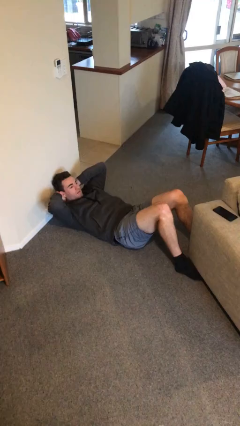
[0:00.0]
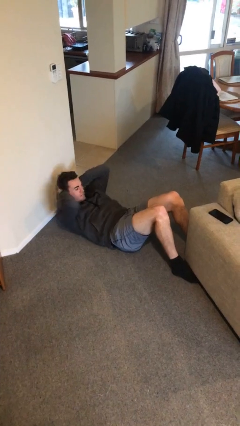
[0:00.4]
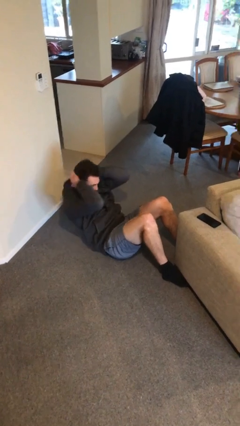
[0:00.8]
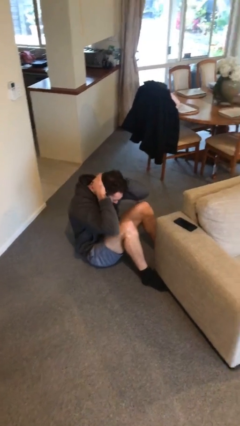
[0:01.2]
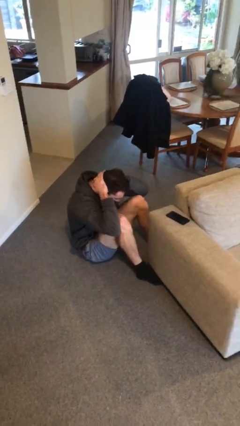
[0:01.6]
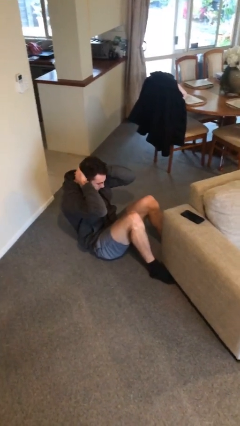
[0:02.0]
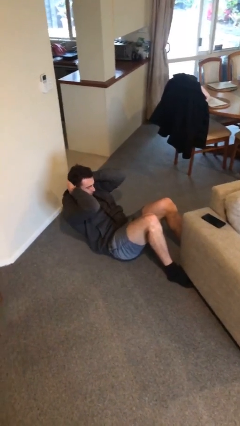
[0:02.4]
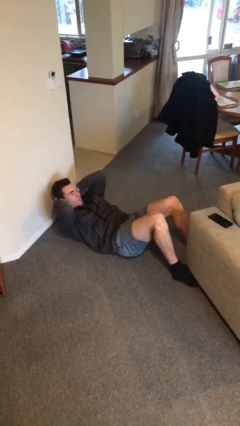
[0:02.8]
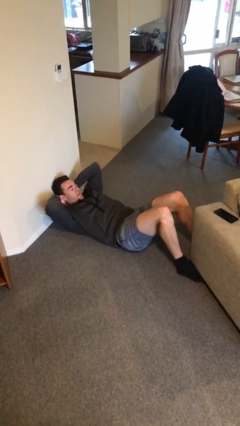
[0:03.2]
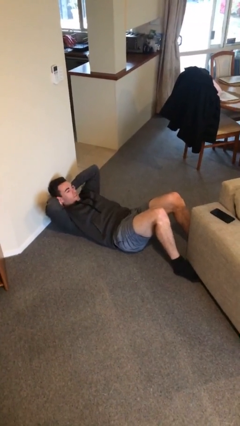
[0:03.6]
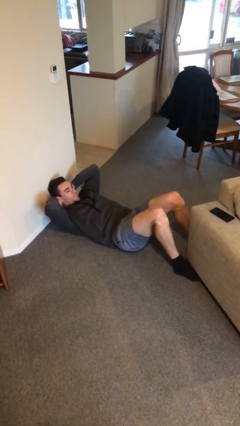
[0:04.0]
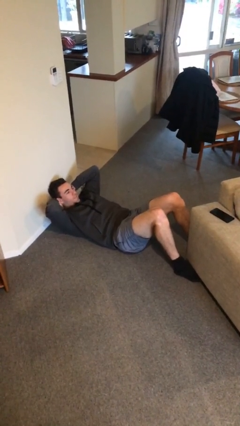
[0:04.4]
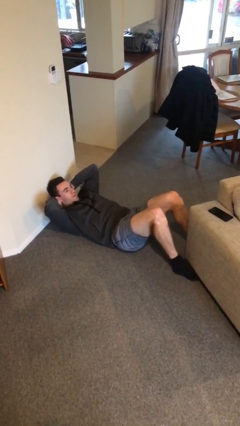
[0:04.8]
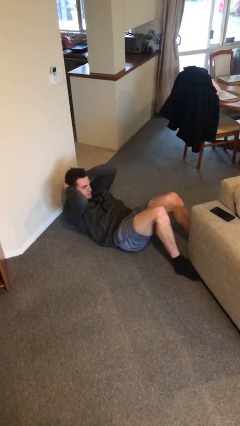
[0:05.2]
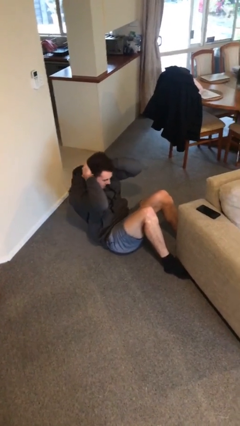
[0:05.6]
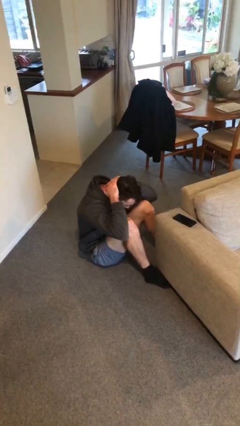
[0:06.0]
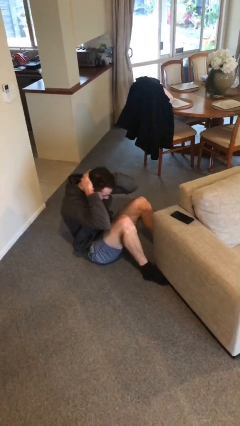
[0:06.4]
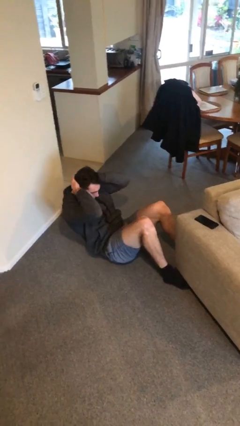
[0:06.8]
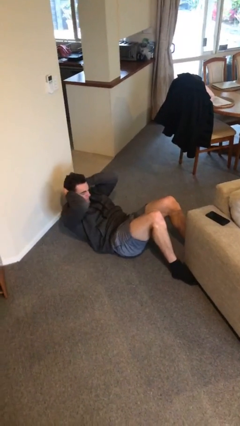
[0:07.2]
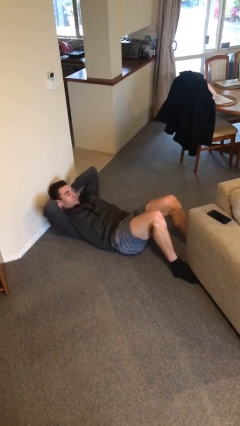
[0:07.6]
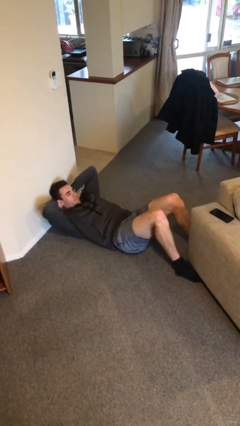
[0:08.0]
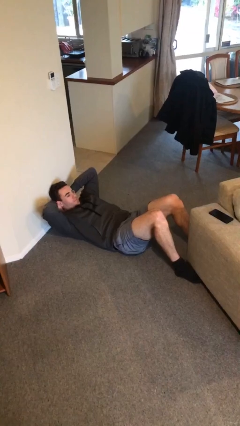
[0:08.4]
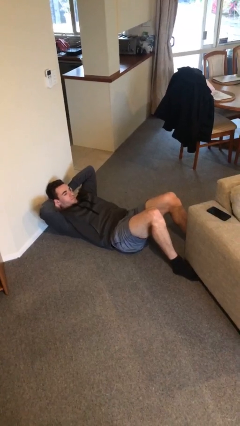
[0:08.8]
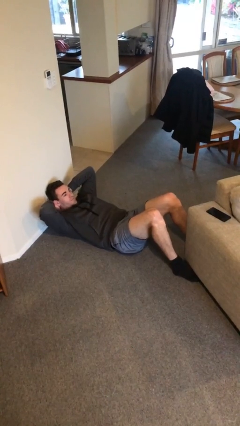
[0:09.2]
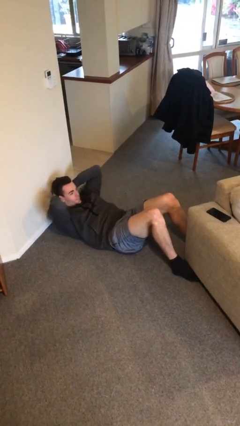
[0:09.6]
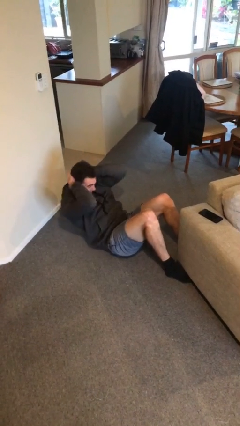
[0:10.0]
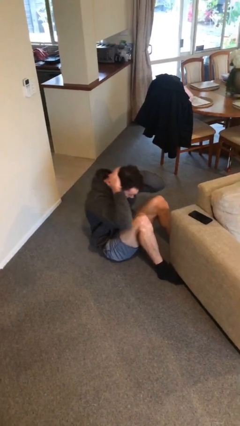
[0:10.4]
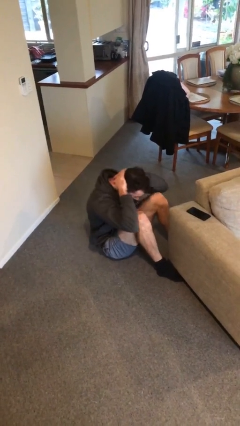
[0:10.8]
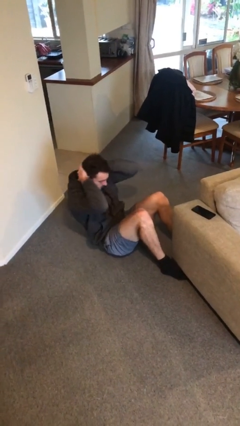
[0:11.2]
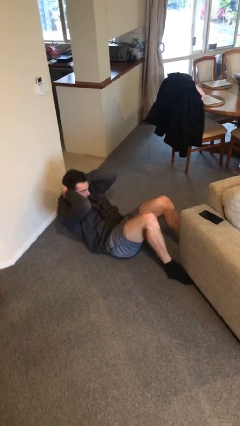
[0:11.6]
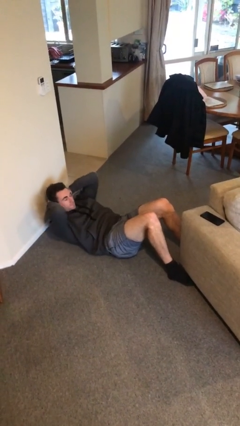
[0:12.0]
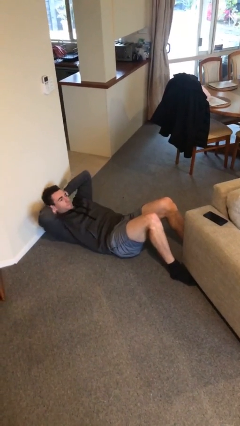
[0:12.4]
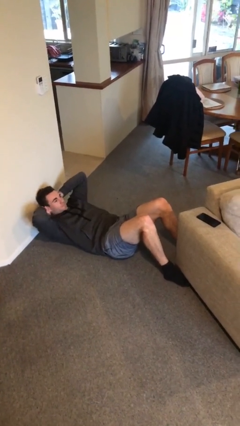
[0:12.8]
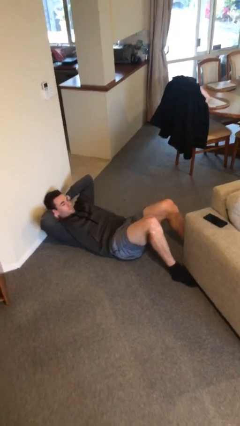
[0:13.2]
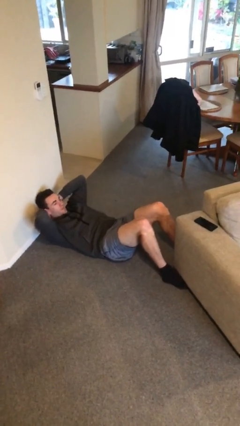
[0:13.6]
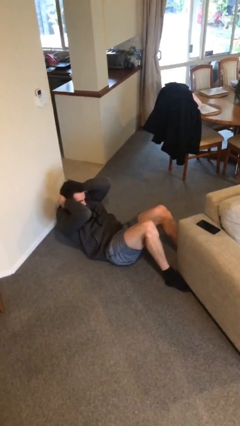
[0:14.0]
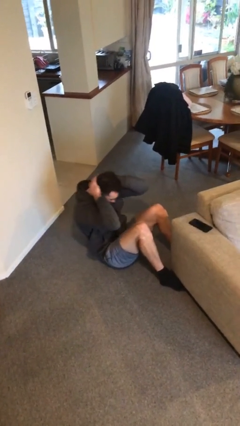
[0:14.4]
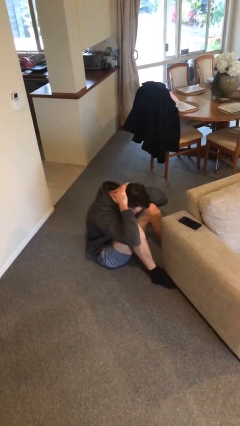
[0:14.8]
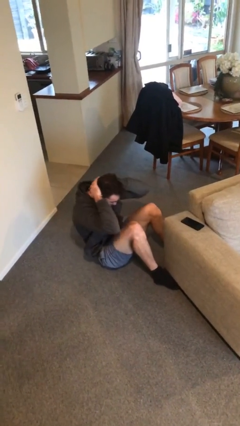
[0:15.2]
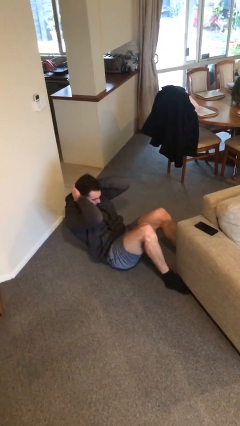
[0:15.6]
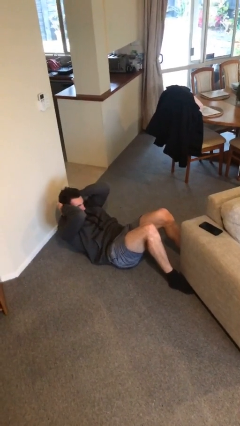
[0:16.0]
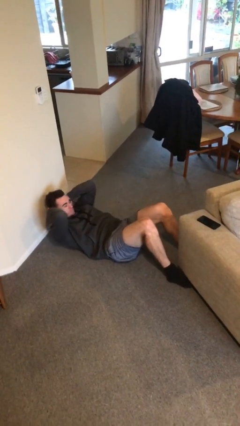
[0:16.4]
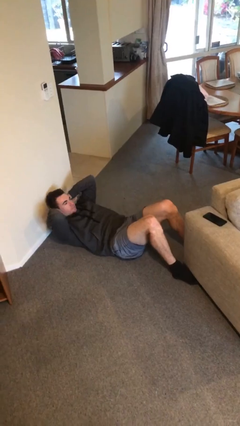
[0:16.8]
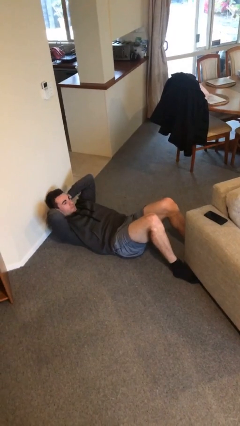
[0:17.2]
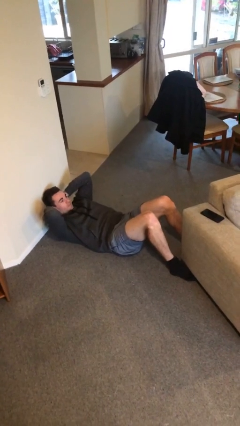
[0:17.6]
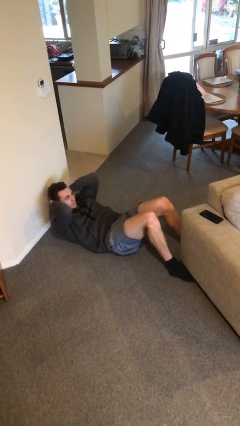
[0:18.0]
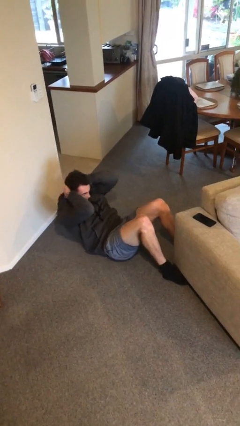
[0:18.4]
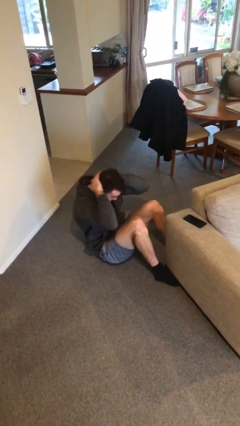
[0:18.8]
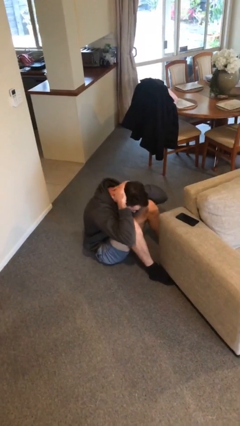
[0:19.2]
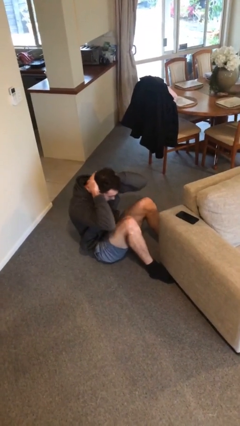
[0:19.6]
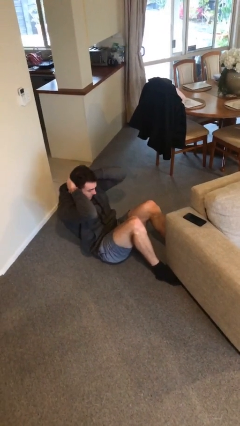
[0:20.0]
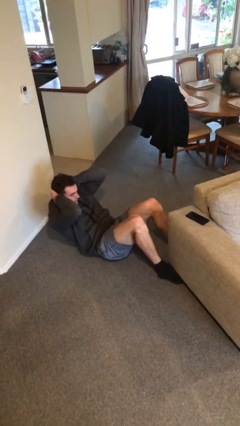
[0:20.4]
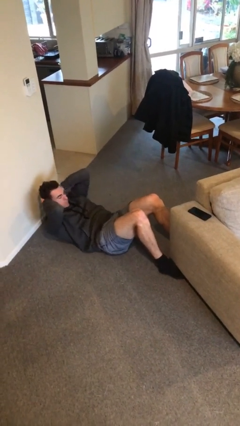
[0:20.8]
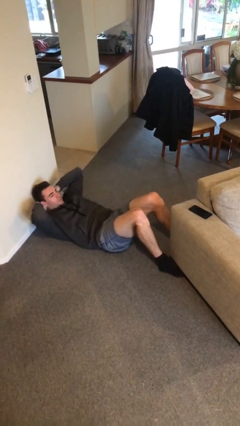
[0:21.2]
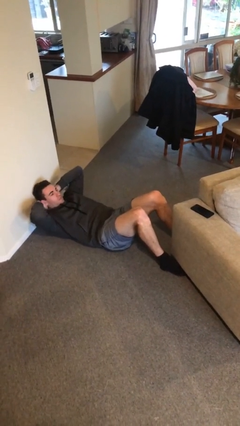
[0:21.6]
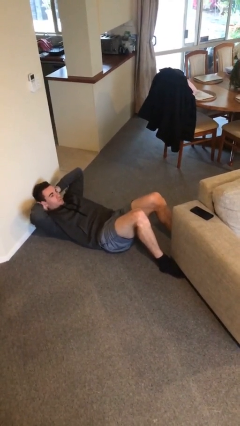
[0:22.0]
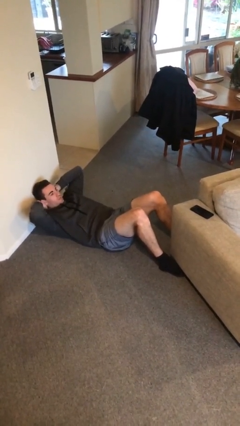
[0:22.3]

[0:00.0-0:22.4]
person exercises with situp

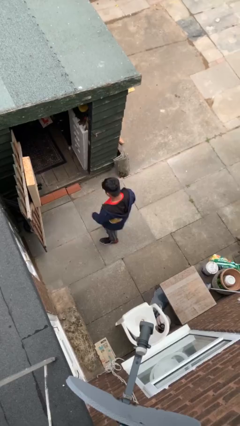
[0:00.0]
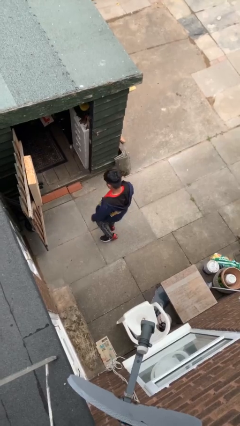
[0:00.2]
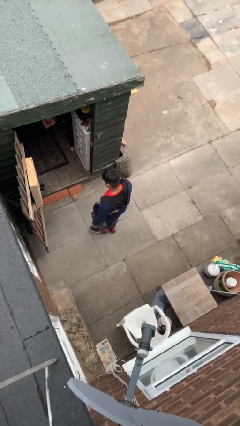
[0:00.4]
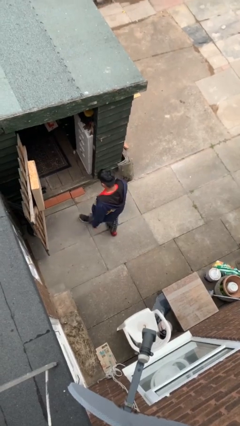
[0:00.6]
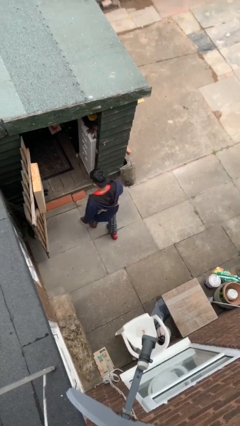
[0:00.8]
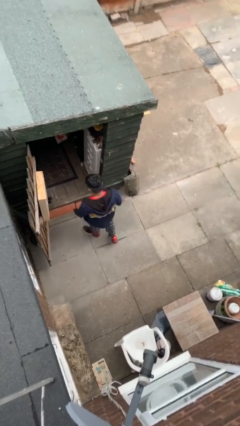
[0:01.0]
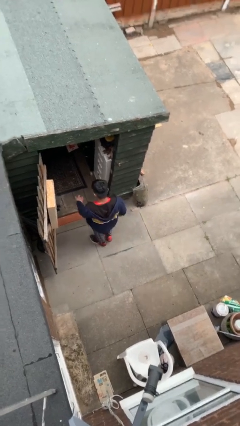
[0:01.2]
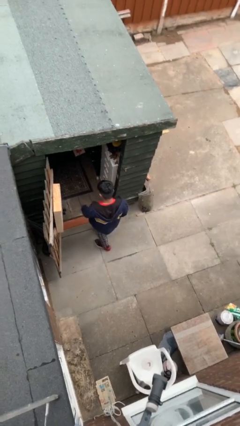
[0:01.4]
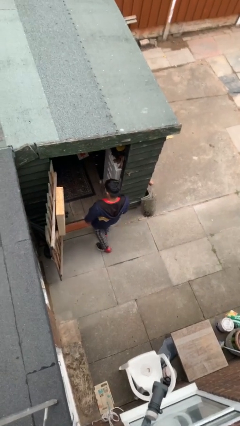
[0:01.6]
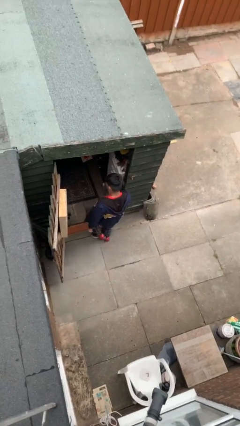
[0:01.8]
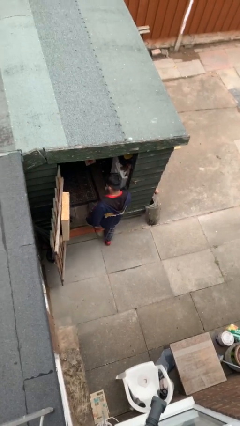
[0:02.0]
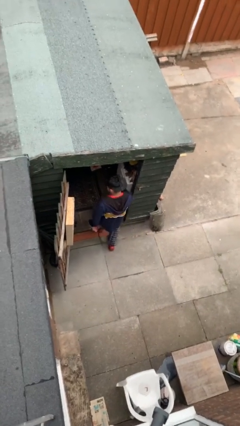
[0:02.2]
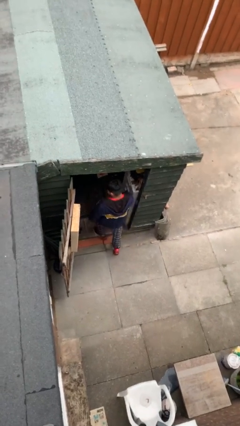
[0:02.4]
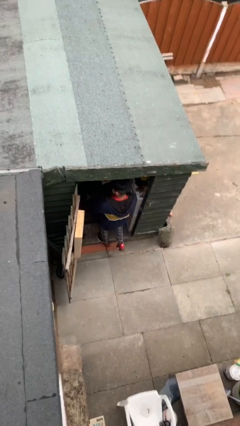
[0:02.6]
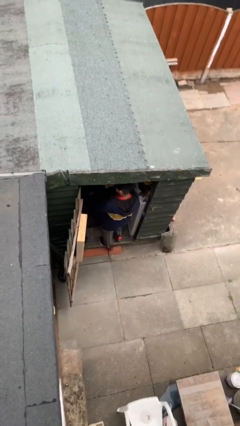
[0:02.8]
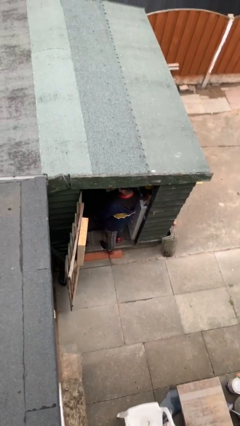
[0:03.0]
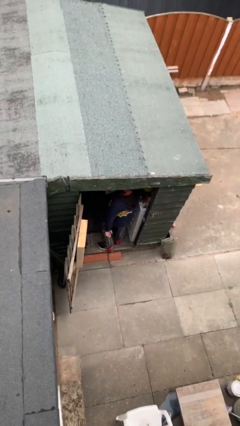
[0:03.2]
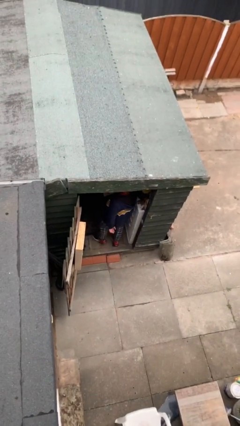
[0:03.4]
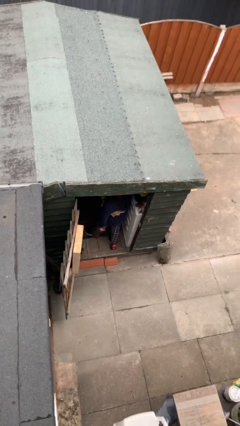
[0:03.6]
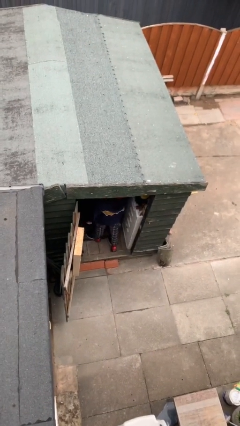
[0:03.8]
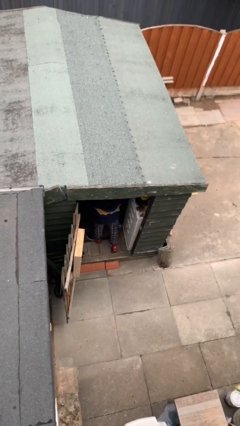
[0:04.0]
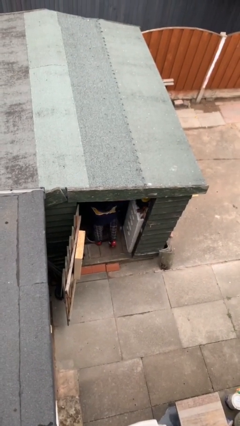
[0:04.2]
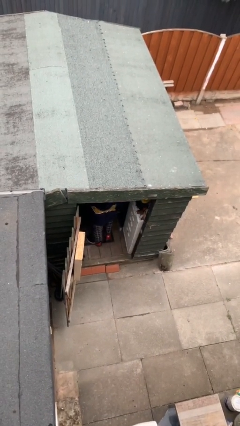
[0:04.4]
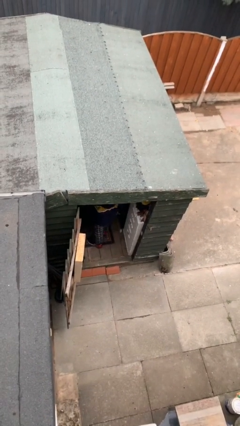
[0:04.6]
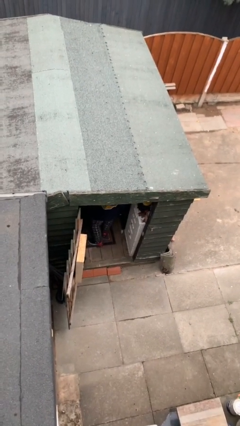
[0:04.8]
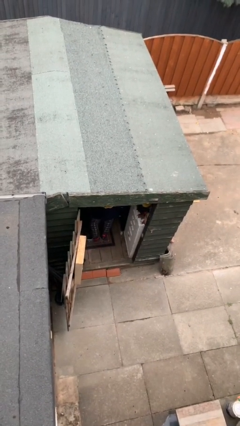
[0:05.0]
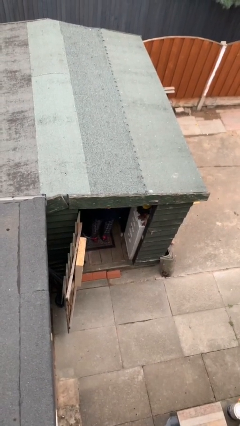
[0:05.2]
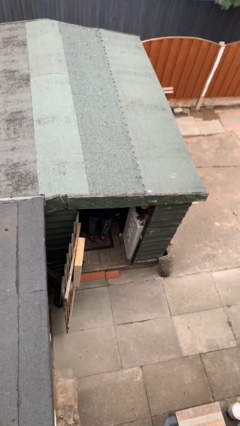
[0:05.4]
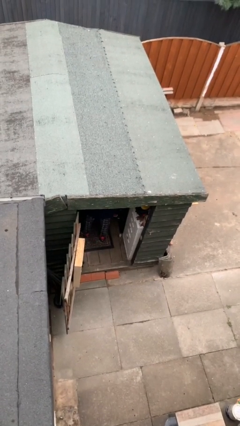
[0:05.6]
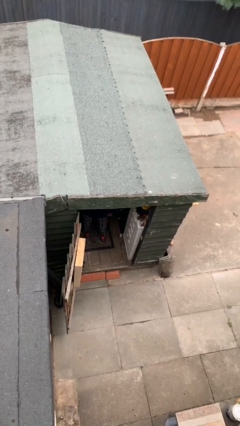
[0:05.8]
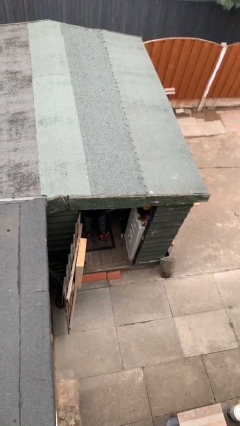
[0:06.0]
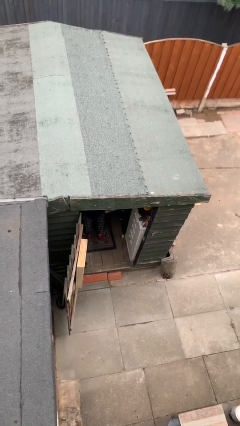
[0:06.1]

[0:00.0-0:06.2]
person exits scene through structure

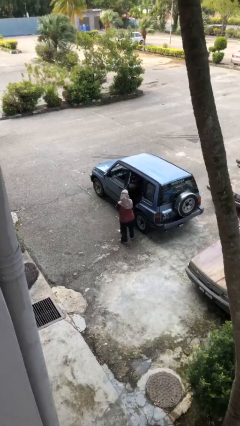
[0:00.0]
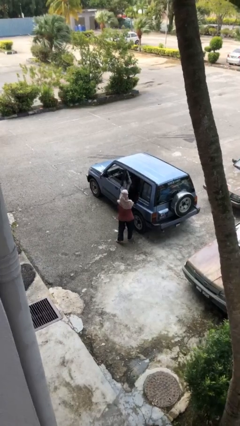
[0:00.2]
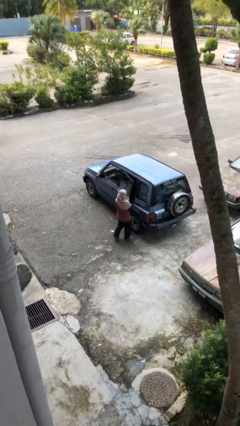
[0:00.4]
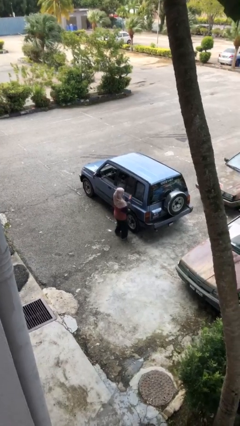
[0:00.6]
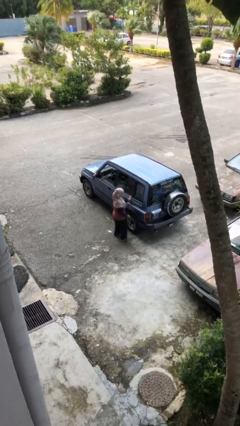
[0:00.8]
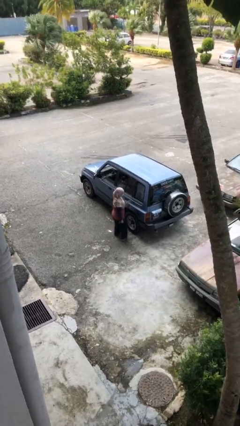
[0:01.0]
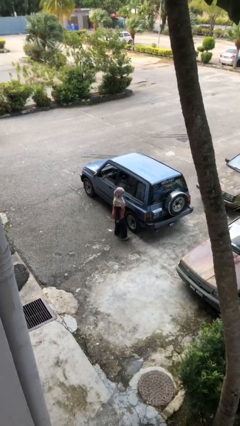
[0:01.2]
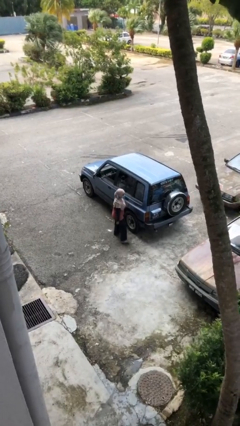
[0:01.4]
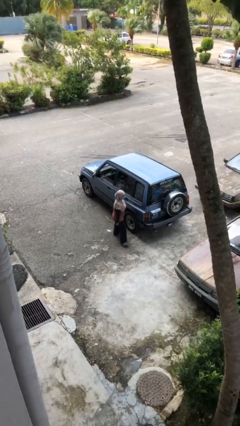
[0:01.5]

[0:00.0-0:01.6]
person closes car door
